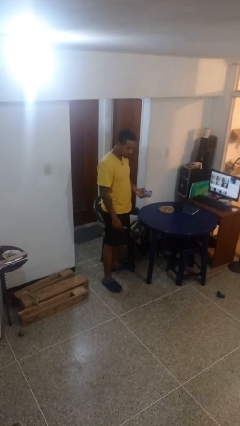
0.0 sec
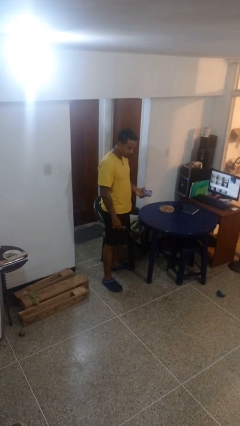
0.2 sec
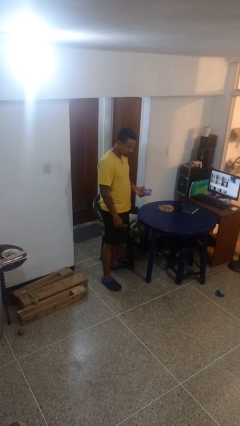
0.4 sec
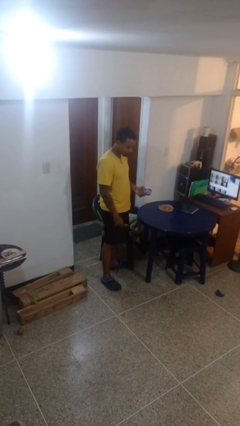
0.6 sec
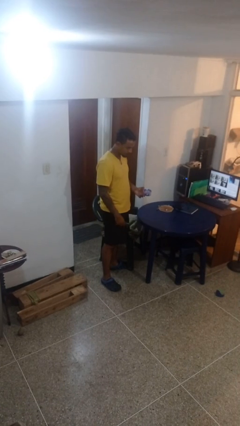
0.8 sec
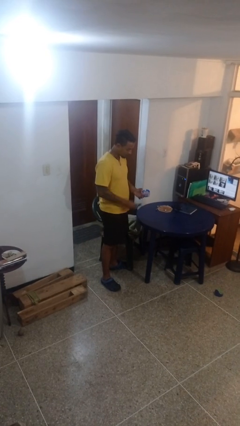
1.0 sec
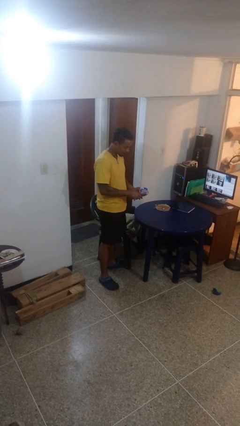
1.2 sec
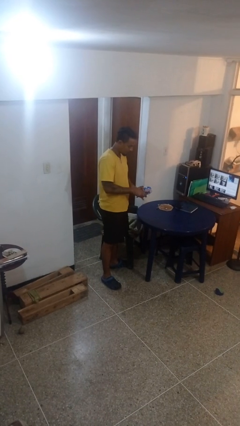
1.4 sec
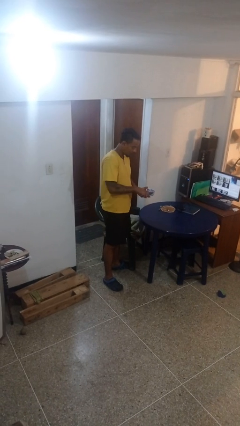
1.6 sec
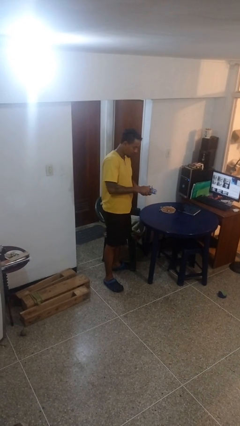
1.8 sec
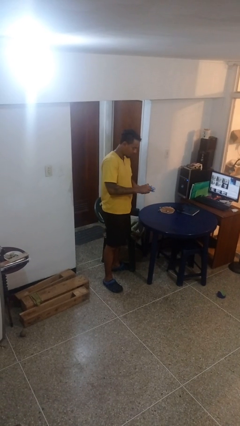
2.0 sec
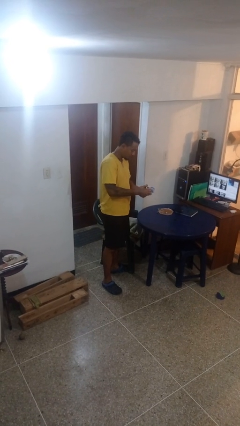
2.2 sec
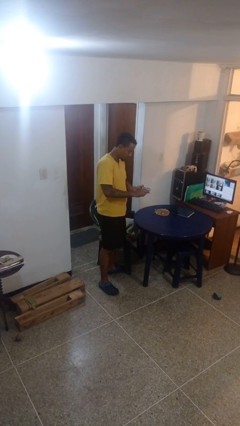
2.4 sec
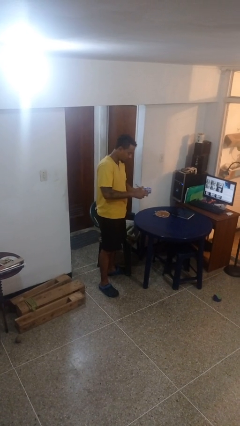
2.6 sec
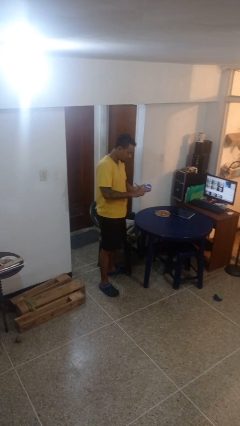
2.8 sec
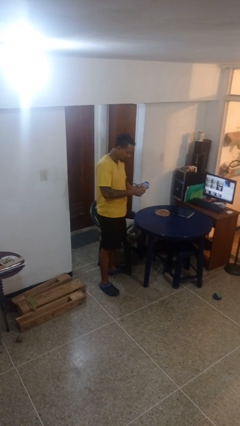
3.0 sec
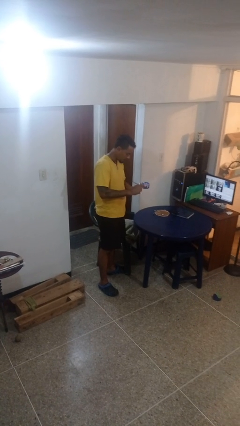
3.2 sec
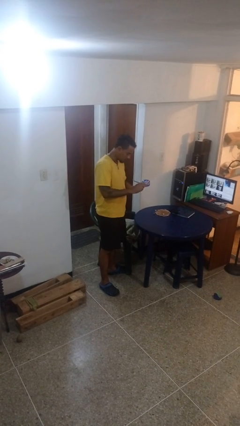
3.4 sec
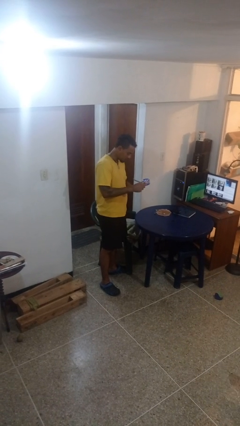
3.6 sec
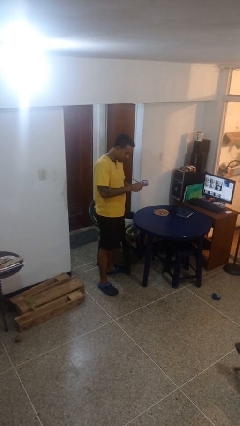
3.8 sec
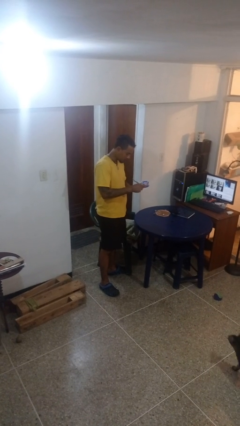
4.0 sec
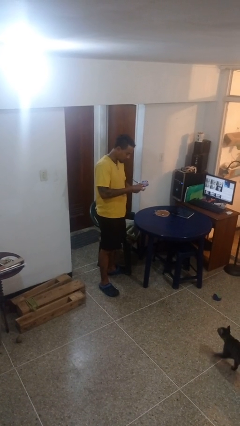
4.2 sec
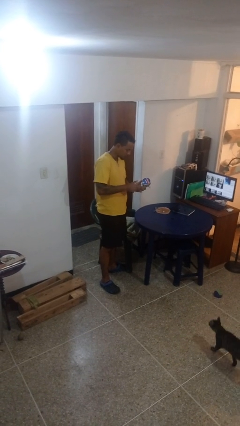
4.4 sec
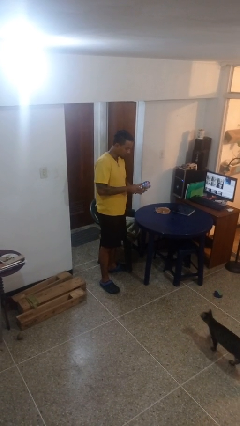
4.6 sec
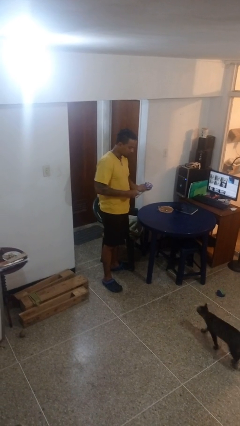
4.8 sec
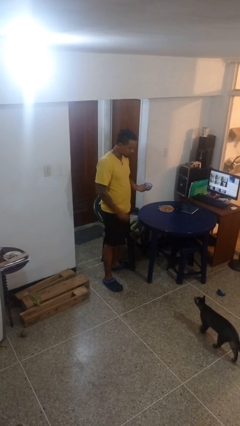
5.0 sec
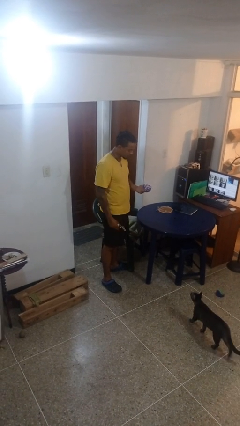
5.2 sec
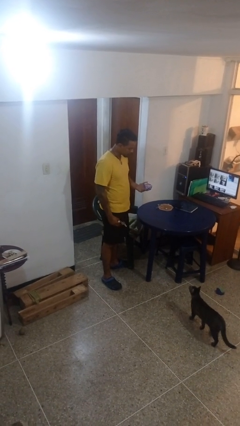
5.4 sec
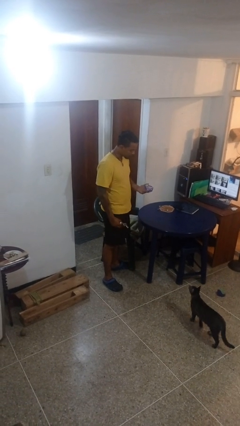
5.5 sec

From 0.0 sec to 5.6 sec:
person opens can with can opener

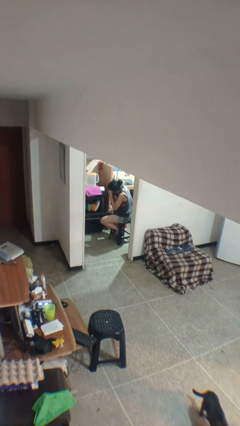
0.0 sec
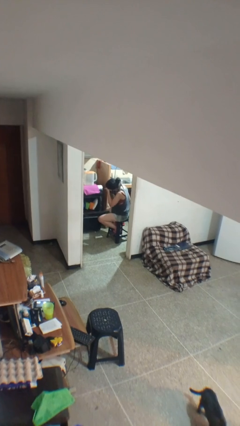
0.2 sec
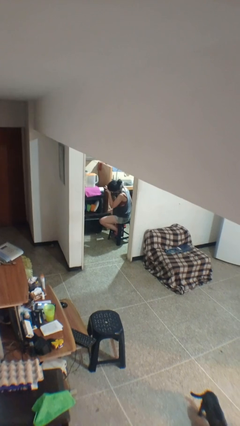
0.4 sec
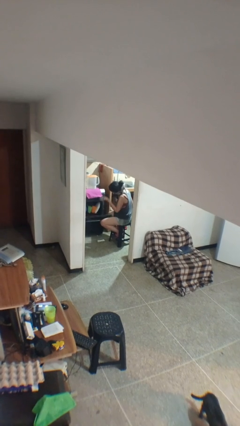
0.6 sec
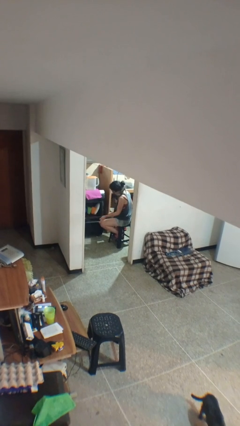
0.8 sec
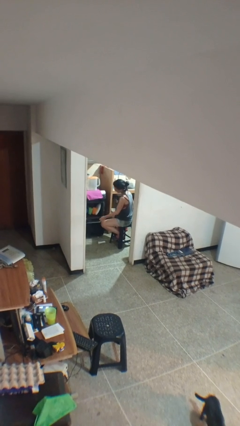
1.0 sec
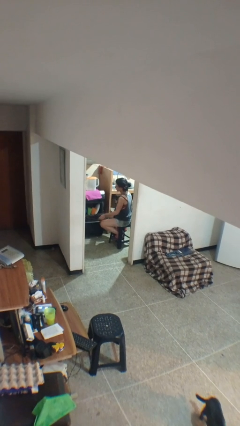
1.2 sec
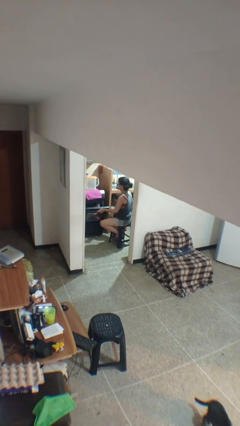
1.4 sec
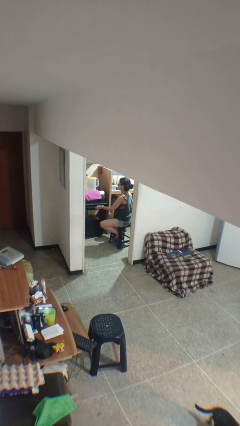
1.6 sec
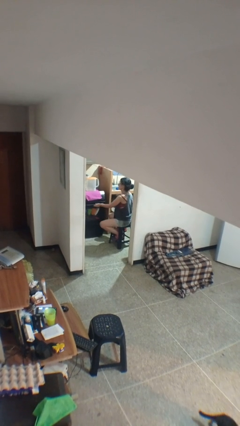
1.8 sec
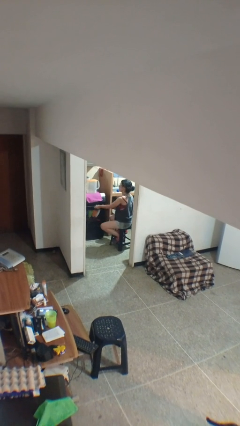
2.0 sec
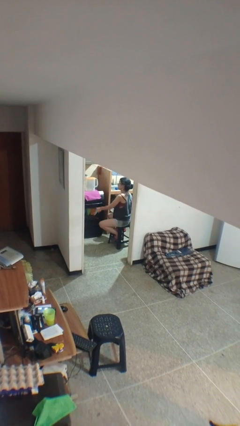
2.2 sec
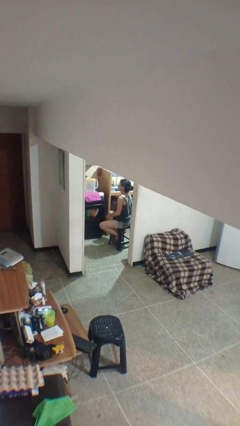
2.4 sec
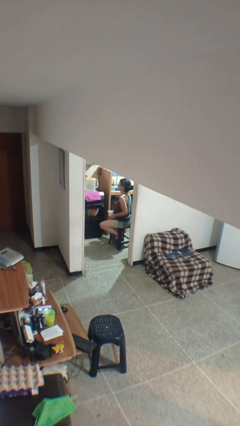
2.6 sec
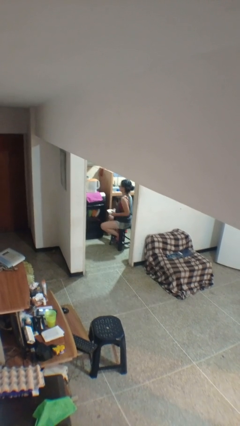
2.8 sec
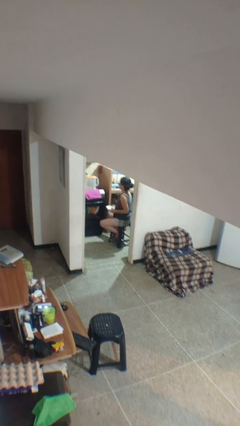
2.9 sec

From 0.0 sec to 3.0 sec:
person closes dishwasher

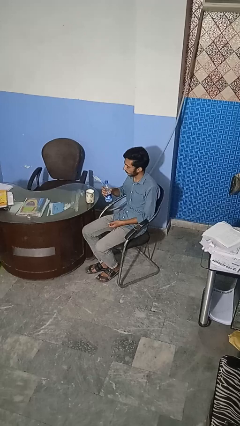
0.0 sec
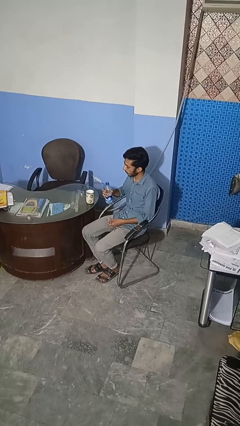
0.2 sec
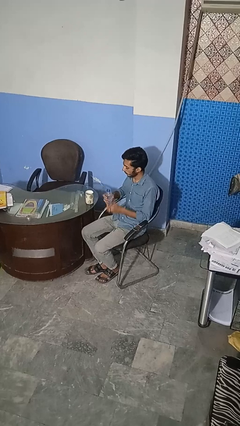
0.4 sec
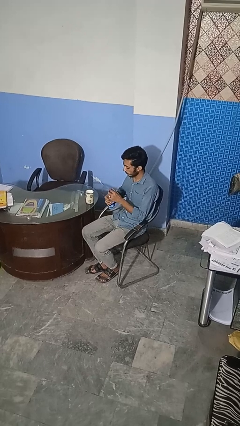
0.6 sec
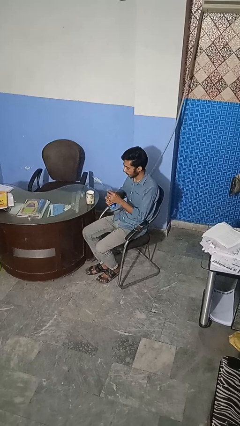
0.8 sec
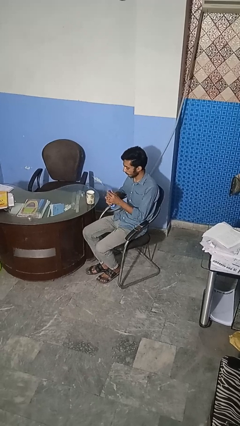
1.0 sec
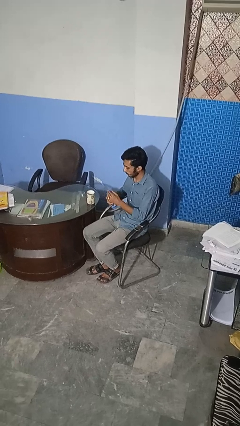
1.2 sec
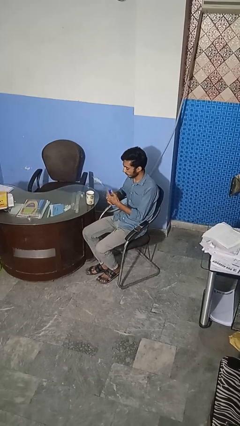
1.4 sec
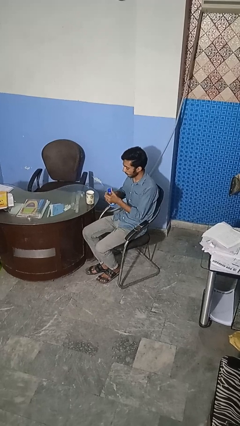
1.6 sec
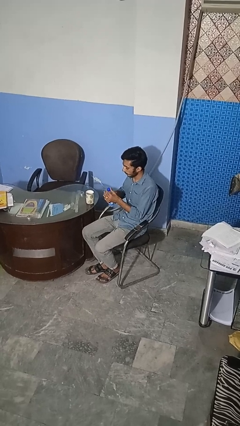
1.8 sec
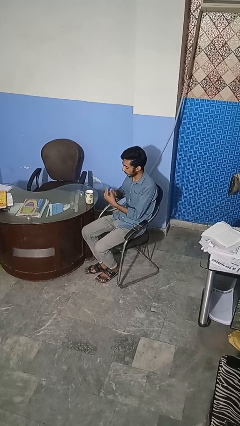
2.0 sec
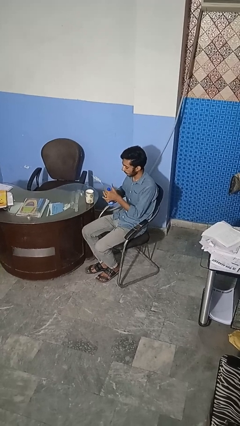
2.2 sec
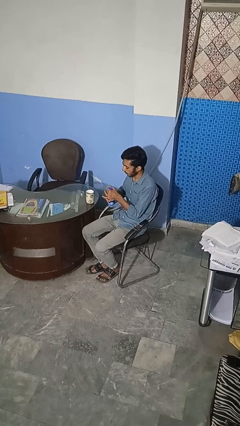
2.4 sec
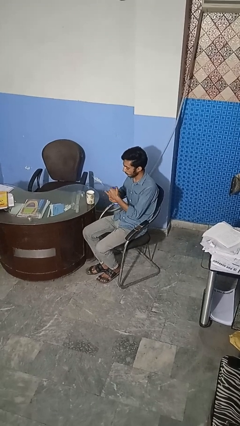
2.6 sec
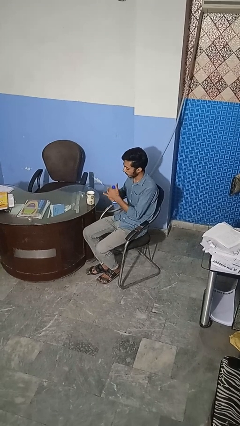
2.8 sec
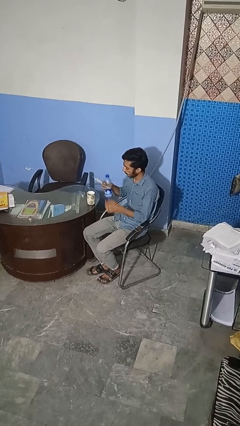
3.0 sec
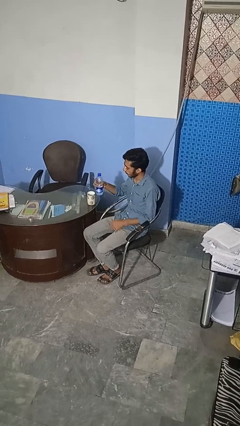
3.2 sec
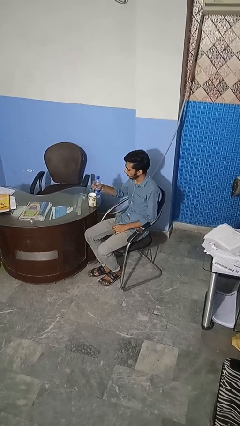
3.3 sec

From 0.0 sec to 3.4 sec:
person screws lid to bottle

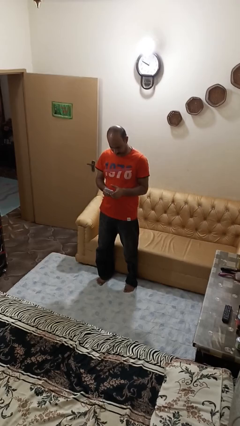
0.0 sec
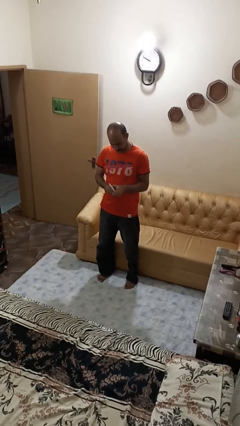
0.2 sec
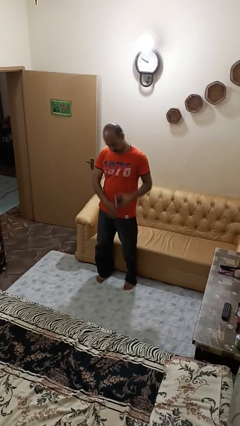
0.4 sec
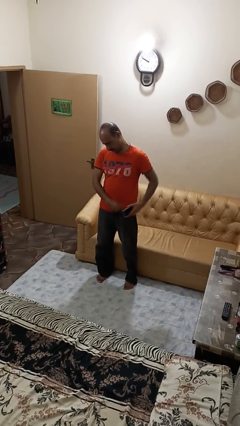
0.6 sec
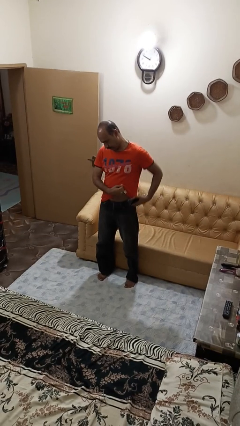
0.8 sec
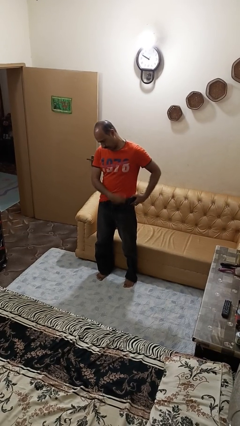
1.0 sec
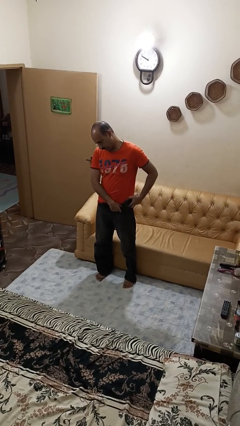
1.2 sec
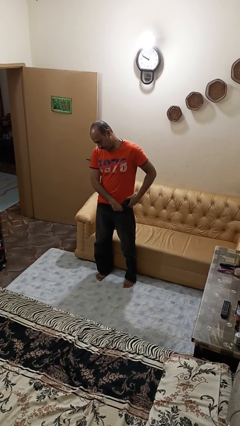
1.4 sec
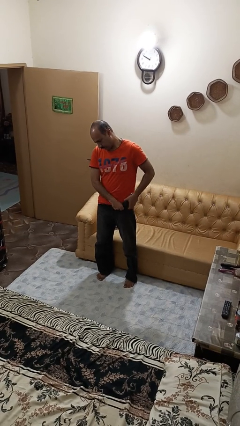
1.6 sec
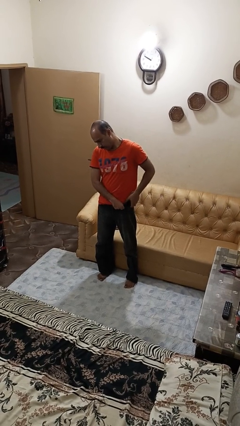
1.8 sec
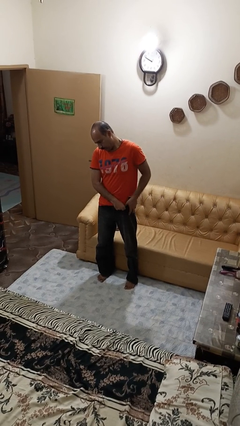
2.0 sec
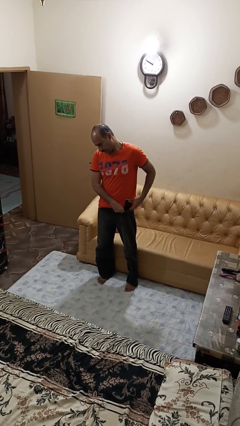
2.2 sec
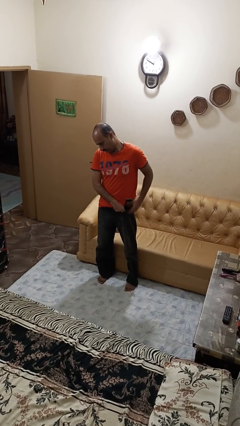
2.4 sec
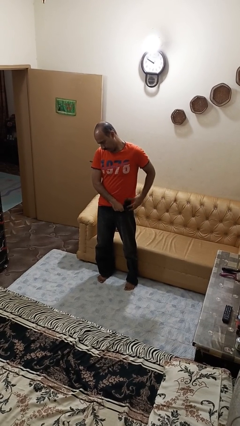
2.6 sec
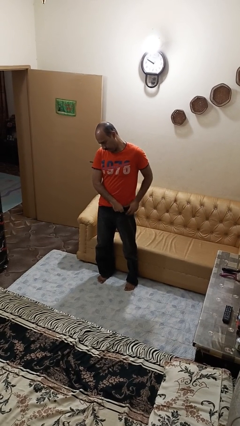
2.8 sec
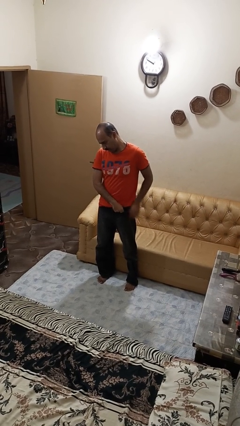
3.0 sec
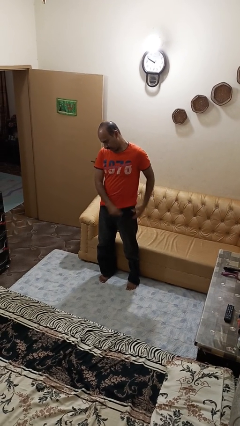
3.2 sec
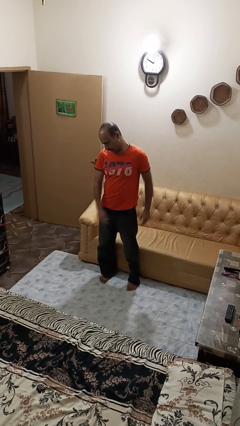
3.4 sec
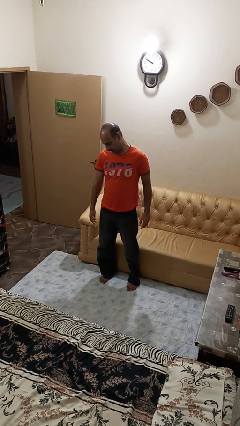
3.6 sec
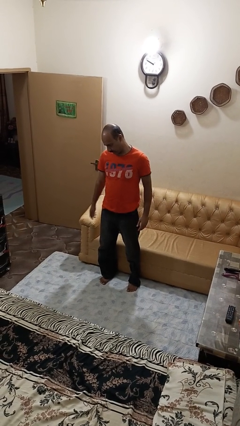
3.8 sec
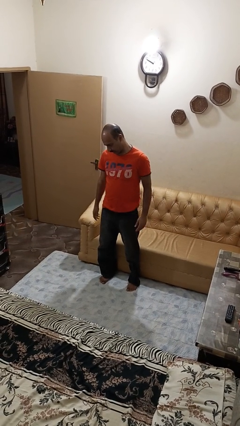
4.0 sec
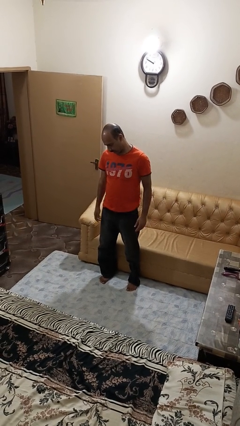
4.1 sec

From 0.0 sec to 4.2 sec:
person puts phone into pocket

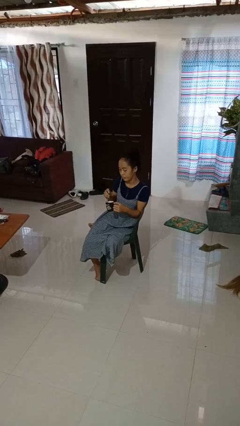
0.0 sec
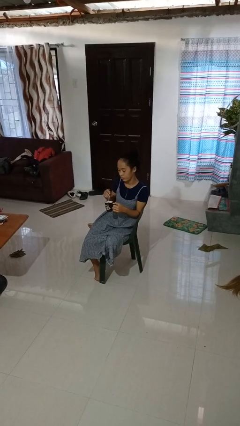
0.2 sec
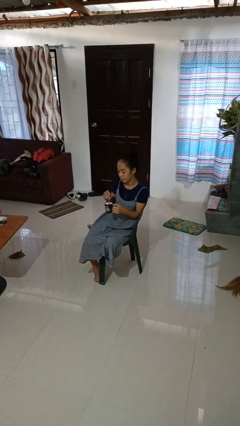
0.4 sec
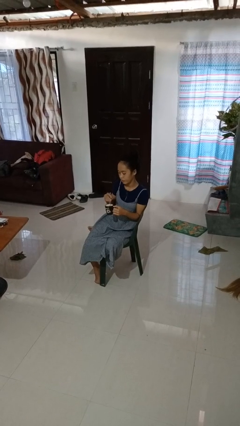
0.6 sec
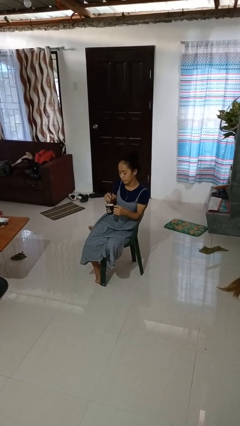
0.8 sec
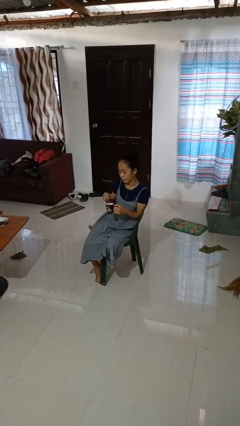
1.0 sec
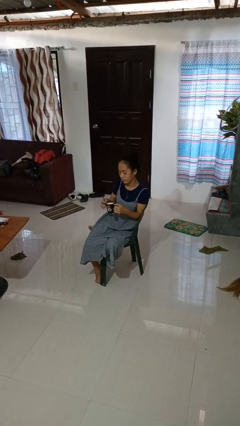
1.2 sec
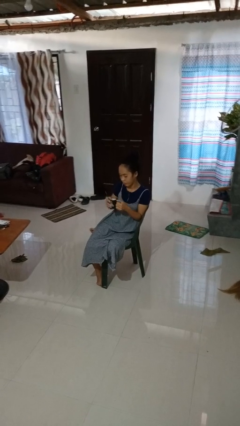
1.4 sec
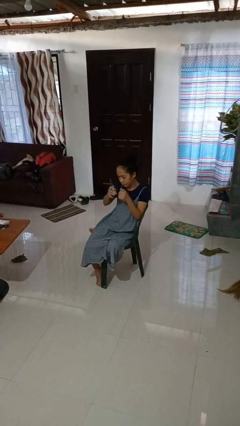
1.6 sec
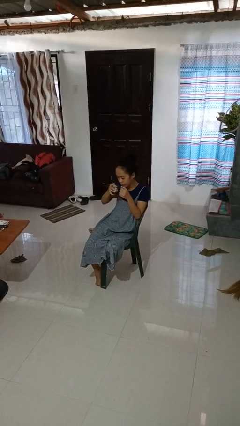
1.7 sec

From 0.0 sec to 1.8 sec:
person stirs mug
